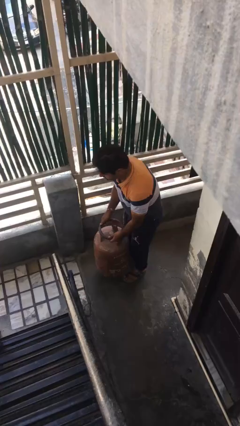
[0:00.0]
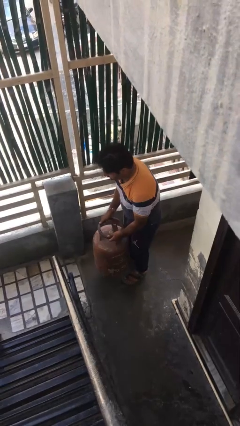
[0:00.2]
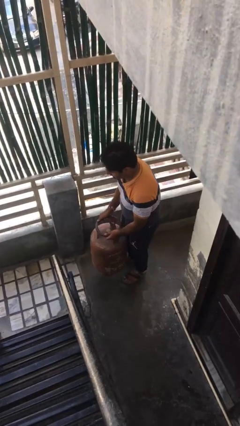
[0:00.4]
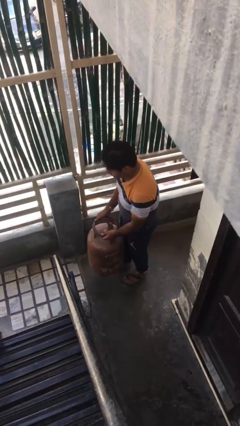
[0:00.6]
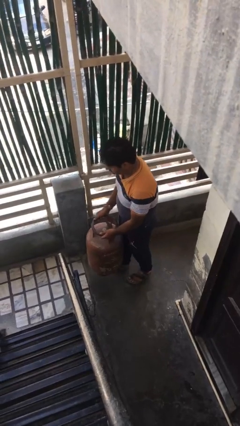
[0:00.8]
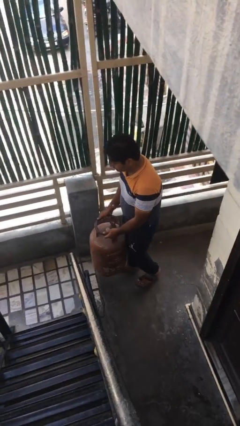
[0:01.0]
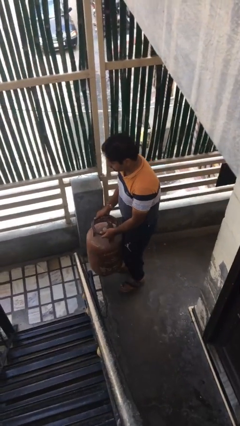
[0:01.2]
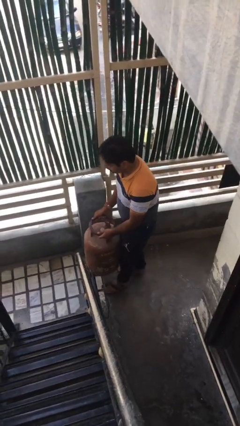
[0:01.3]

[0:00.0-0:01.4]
person picks up object from floor

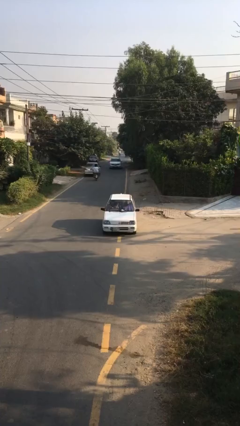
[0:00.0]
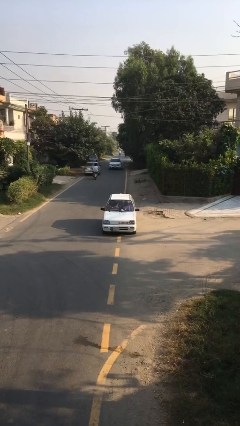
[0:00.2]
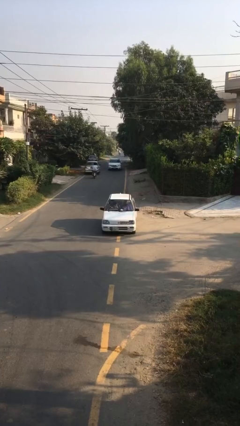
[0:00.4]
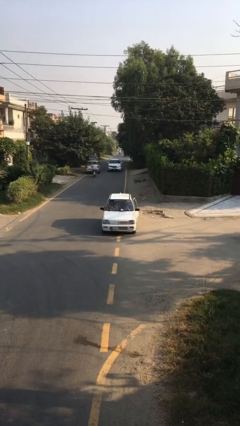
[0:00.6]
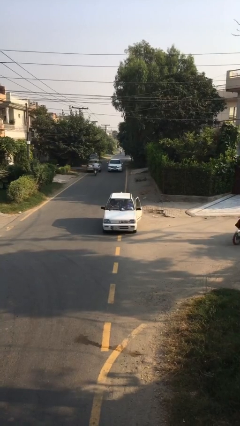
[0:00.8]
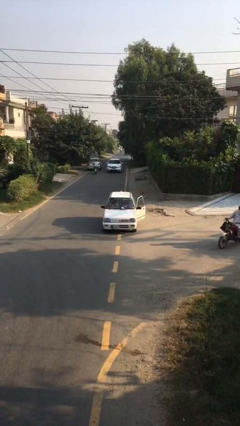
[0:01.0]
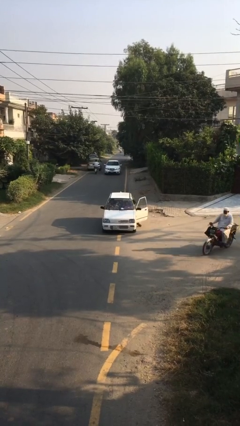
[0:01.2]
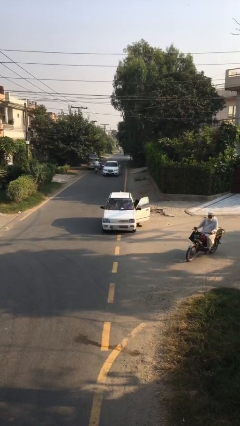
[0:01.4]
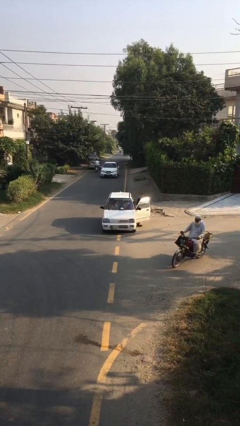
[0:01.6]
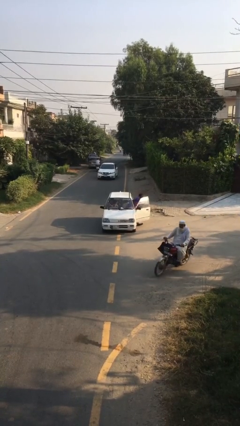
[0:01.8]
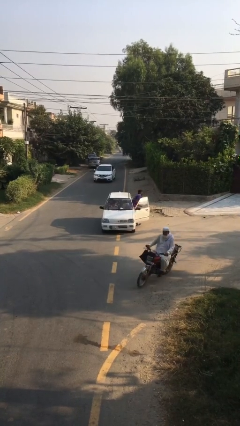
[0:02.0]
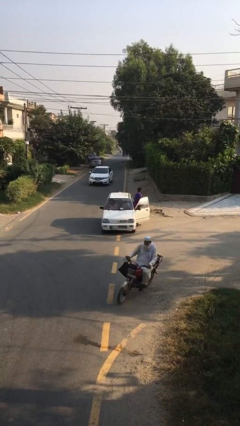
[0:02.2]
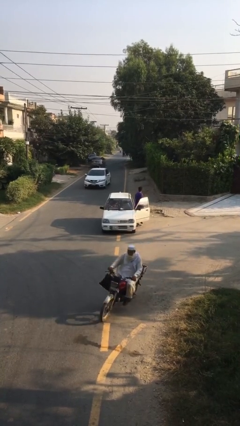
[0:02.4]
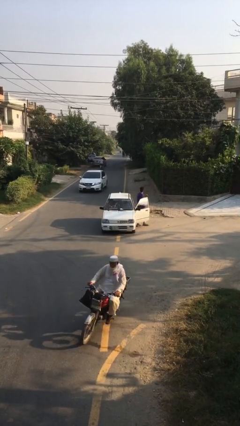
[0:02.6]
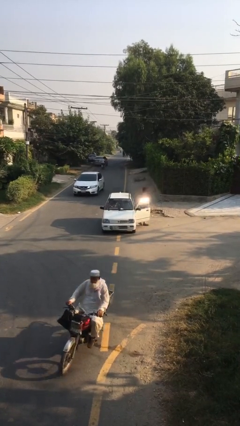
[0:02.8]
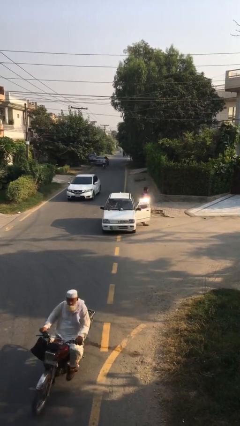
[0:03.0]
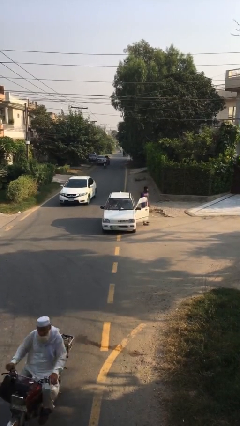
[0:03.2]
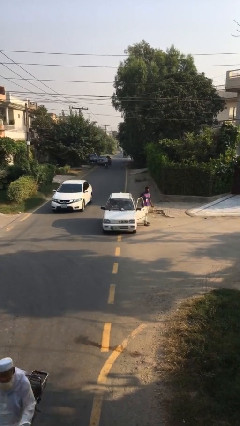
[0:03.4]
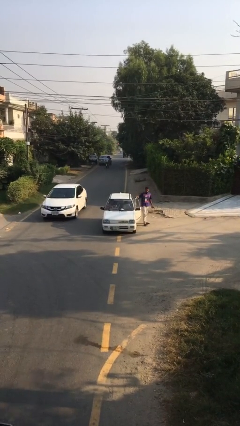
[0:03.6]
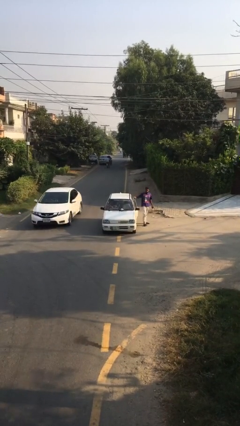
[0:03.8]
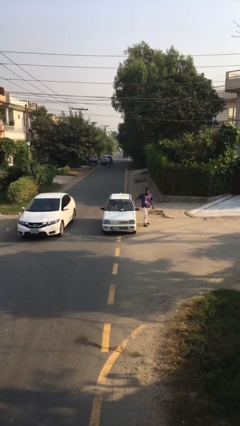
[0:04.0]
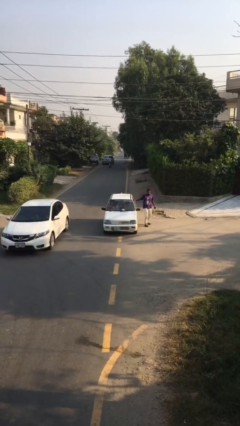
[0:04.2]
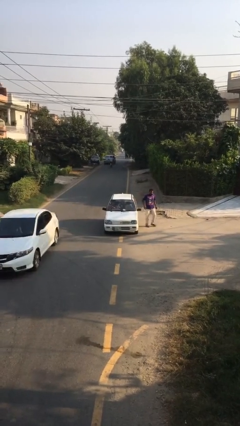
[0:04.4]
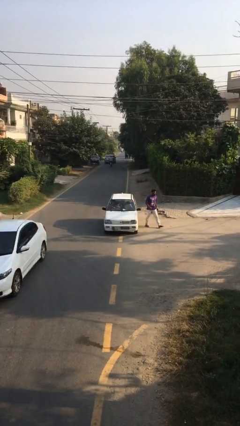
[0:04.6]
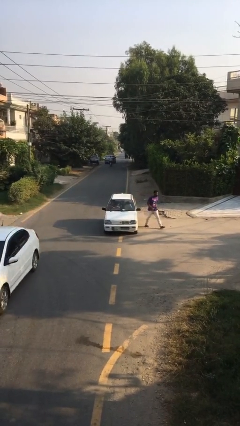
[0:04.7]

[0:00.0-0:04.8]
car drops off person

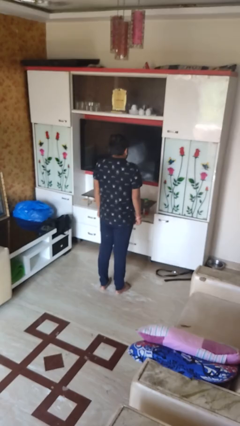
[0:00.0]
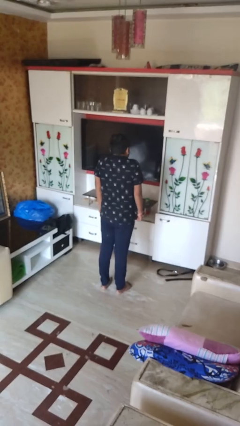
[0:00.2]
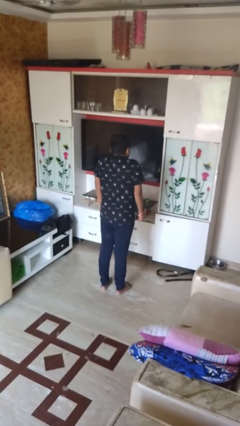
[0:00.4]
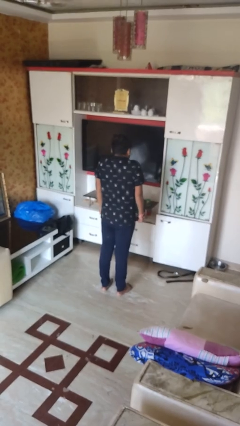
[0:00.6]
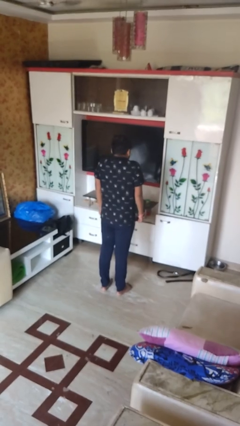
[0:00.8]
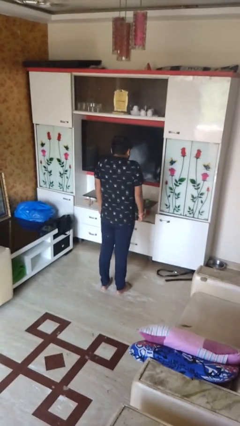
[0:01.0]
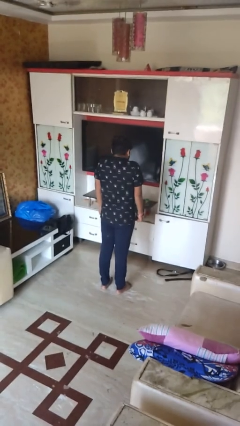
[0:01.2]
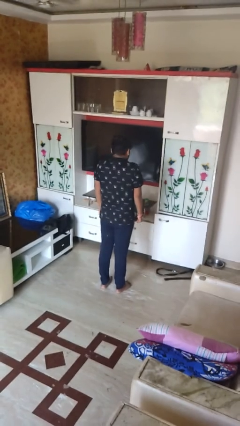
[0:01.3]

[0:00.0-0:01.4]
person shrugs

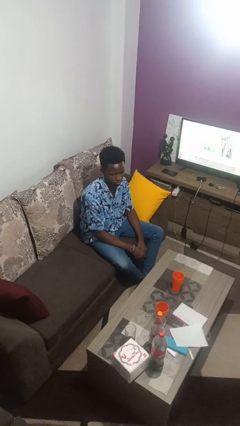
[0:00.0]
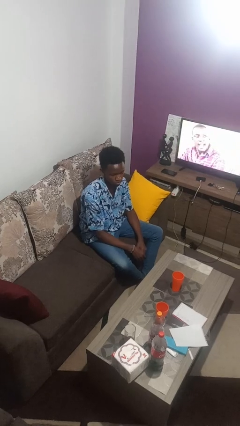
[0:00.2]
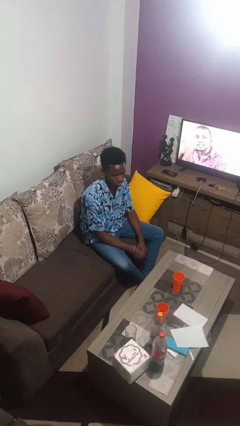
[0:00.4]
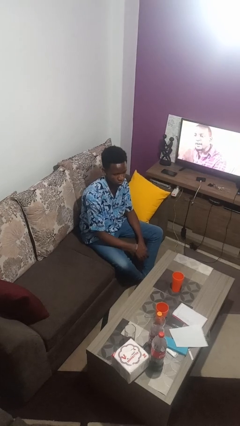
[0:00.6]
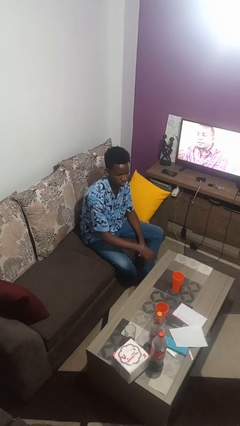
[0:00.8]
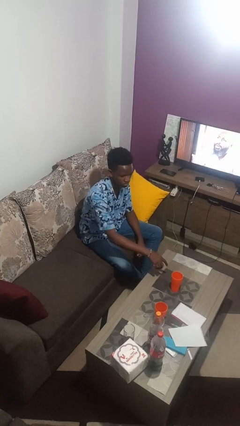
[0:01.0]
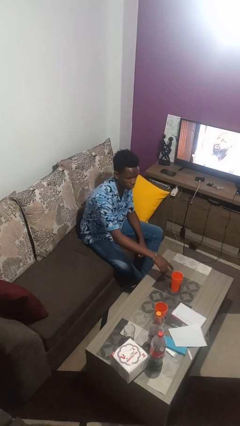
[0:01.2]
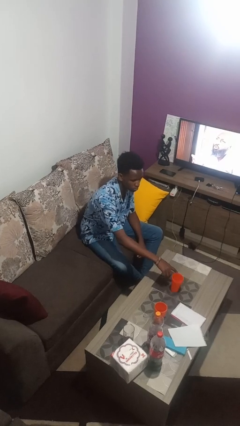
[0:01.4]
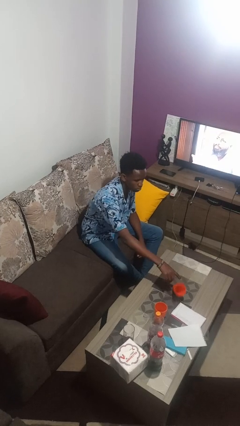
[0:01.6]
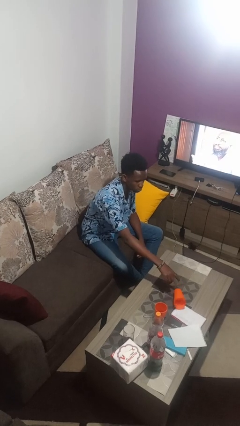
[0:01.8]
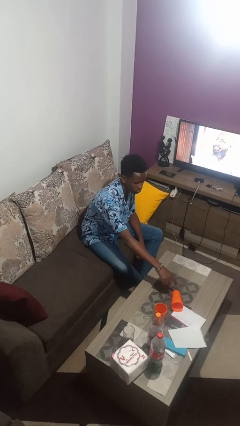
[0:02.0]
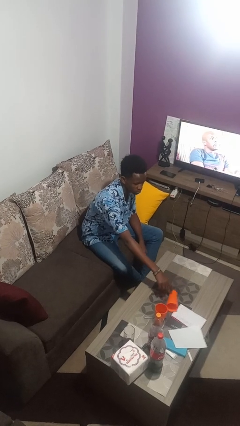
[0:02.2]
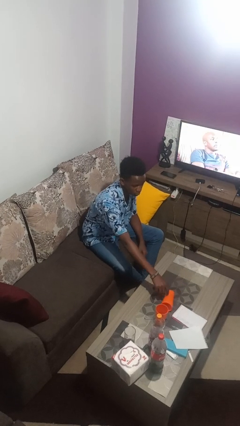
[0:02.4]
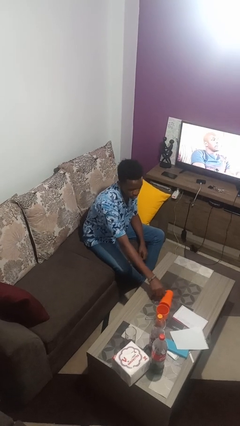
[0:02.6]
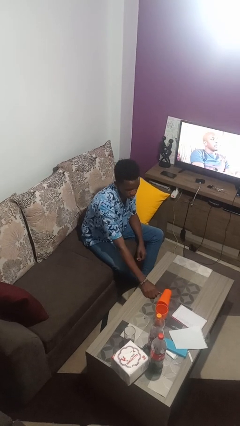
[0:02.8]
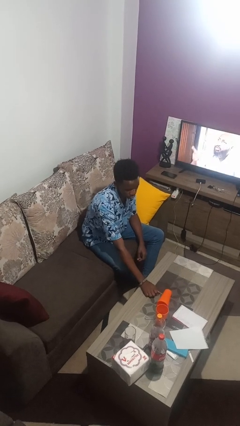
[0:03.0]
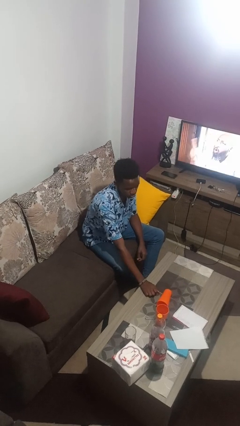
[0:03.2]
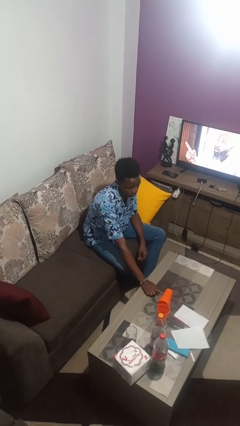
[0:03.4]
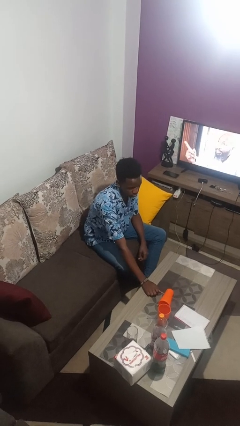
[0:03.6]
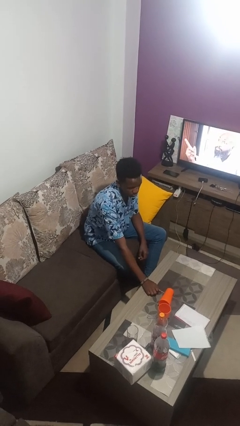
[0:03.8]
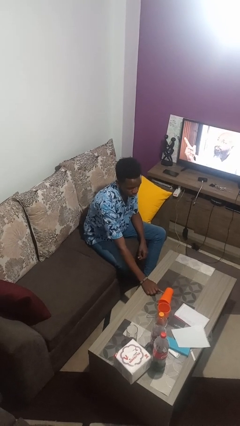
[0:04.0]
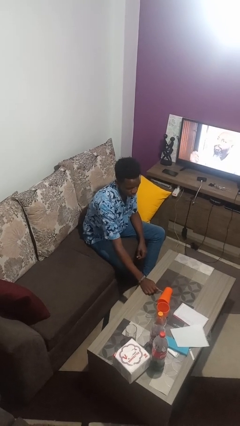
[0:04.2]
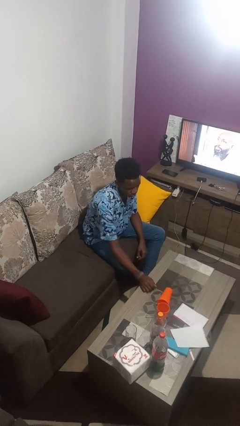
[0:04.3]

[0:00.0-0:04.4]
person knocks over glass

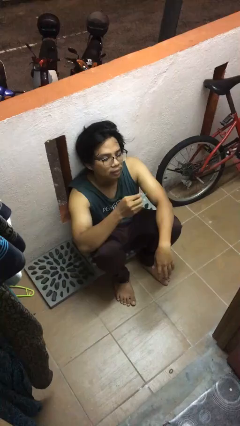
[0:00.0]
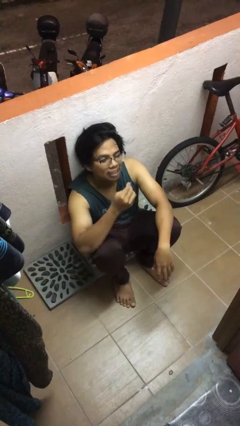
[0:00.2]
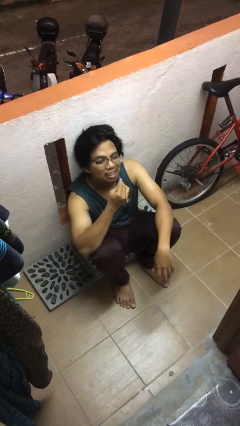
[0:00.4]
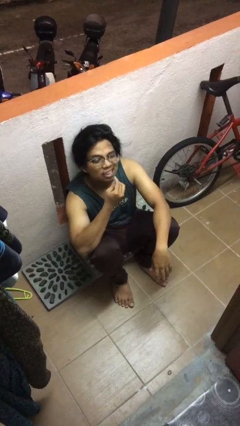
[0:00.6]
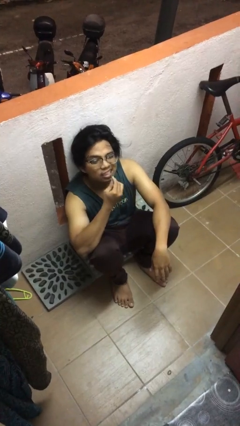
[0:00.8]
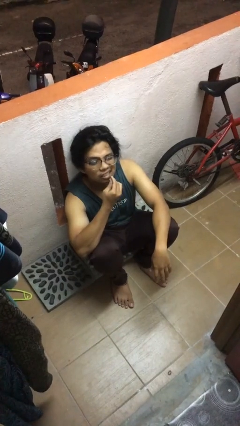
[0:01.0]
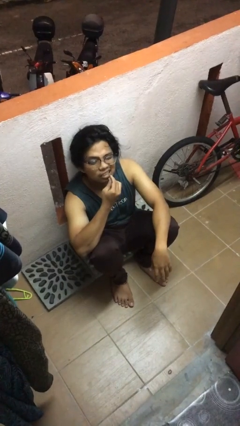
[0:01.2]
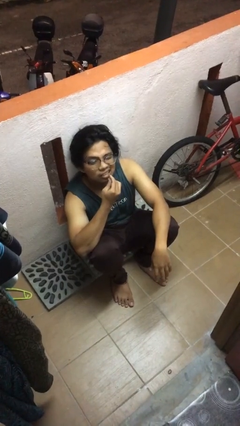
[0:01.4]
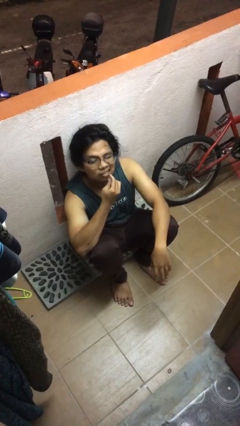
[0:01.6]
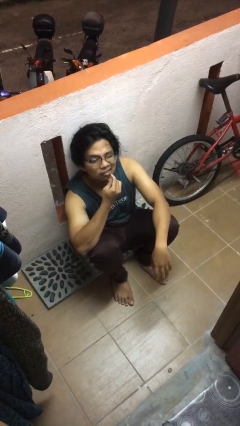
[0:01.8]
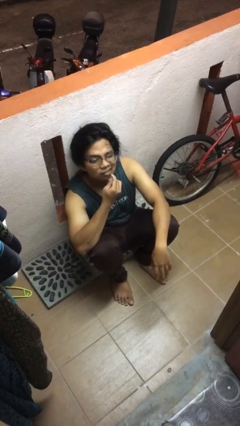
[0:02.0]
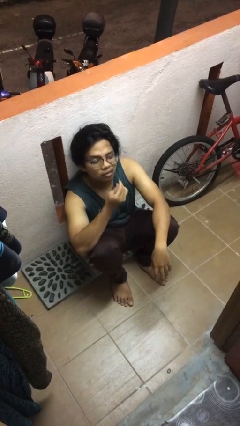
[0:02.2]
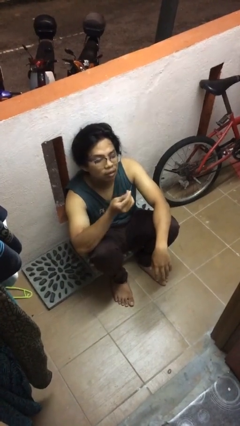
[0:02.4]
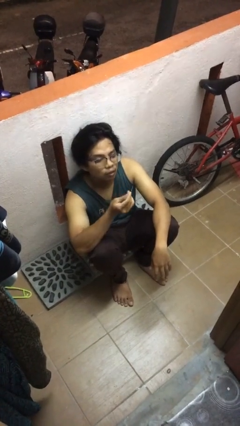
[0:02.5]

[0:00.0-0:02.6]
person flosses

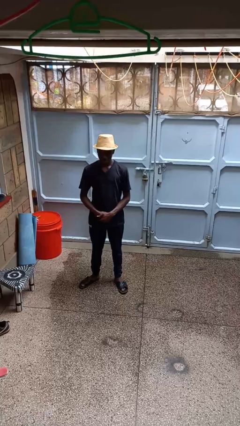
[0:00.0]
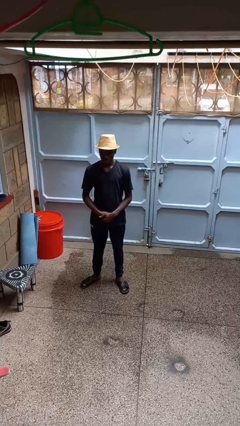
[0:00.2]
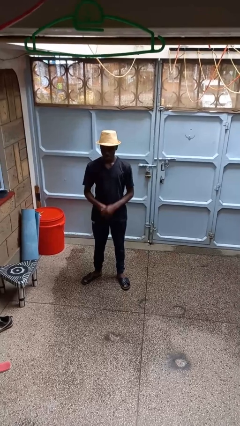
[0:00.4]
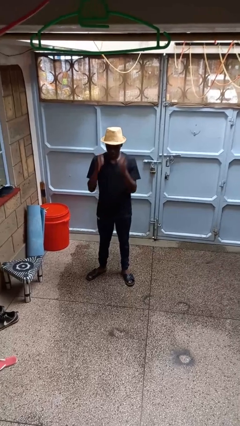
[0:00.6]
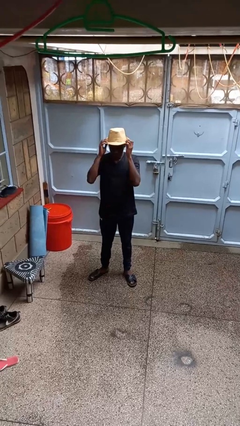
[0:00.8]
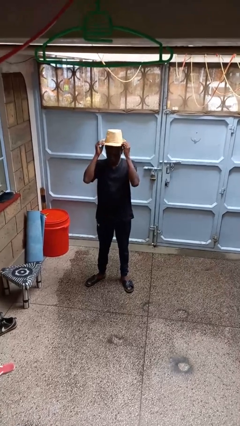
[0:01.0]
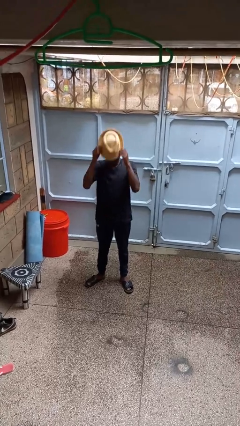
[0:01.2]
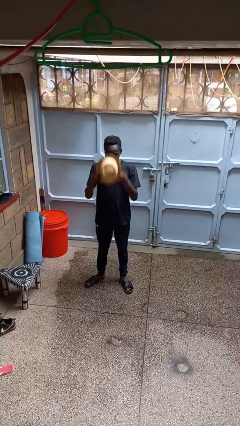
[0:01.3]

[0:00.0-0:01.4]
person takes off hat

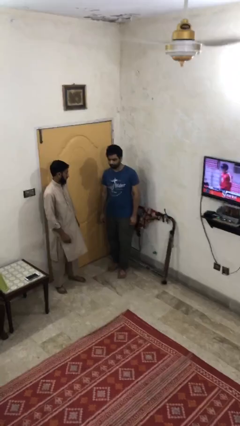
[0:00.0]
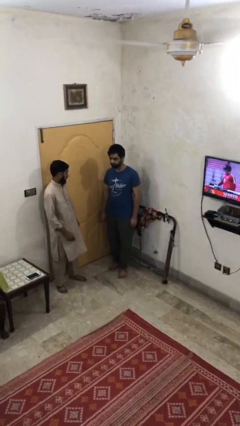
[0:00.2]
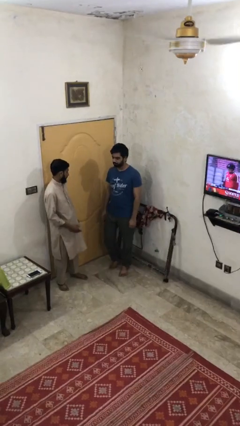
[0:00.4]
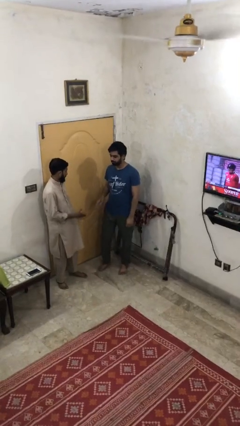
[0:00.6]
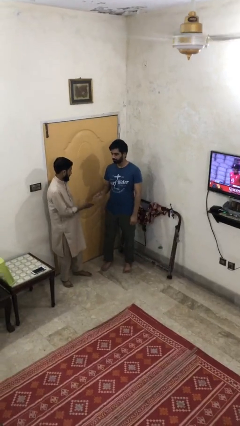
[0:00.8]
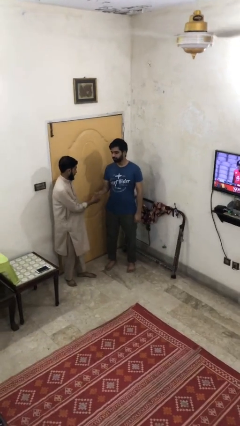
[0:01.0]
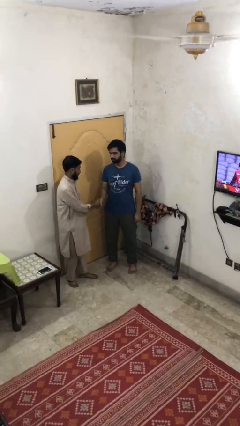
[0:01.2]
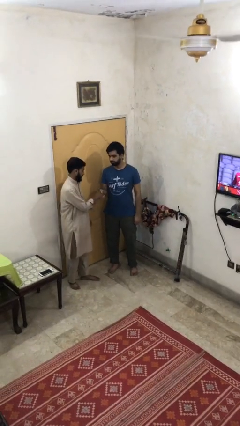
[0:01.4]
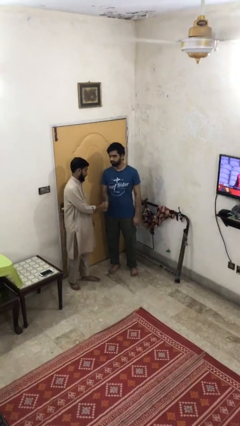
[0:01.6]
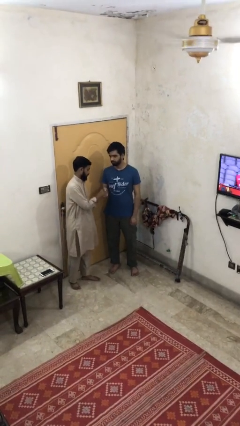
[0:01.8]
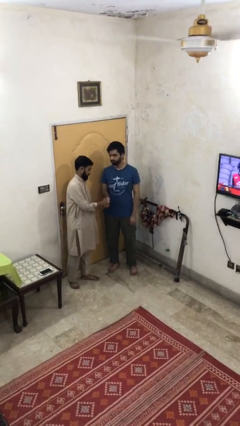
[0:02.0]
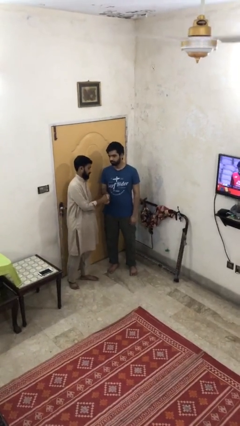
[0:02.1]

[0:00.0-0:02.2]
person shakes hand
